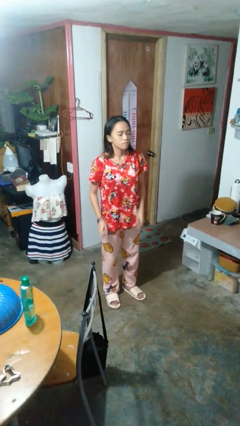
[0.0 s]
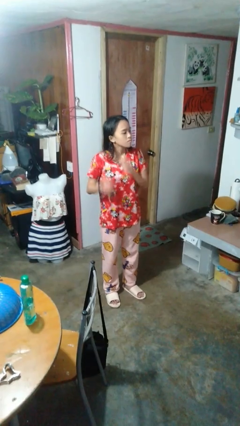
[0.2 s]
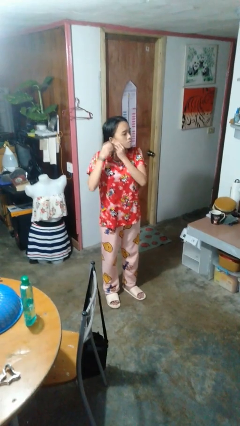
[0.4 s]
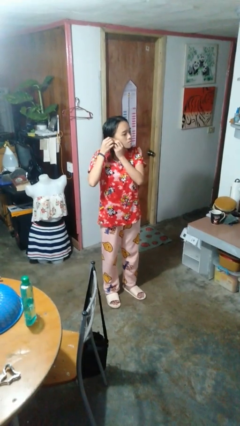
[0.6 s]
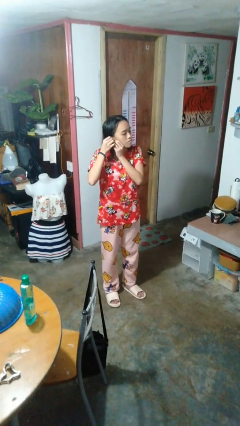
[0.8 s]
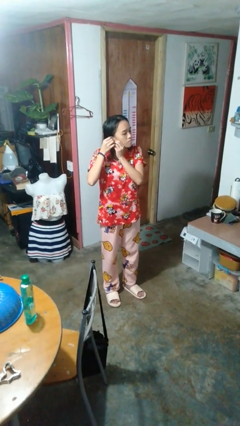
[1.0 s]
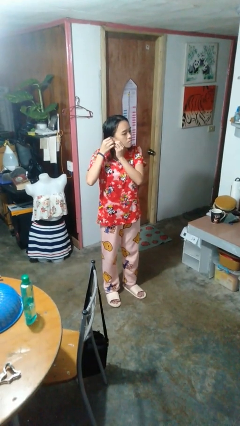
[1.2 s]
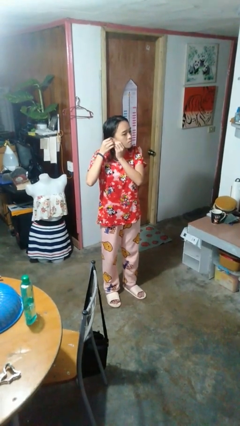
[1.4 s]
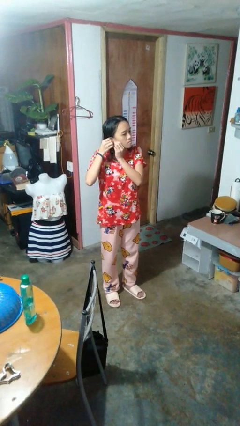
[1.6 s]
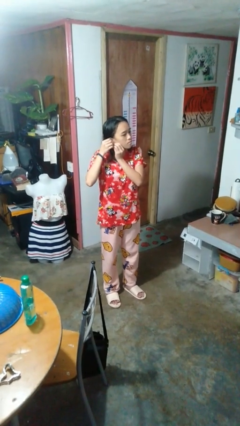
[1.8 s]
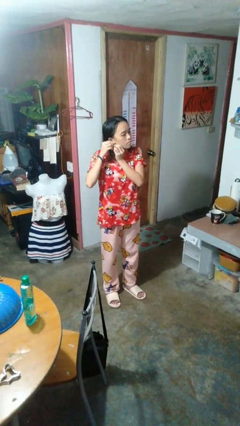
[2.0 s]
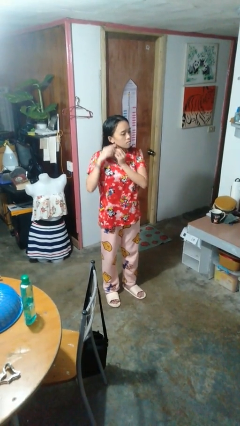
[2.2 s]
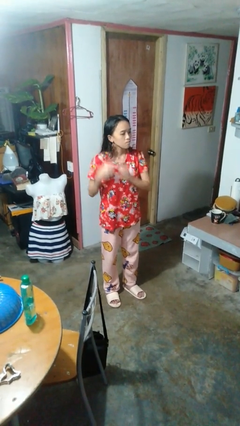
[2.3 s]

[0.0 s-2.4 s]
person puts on earrings

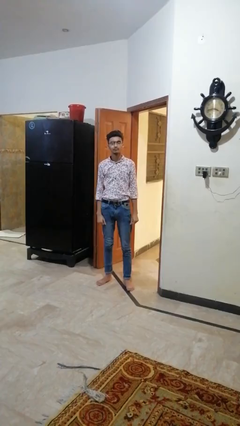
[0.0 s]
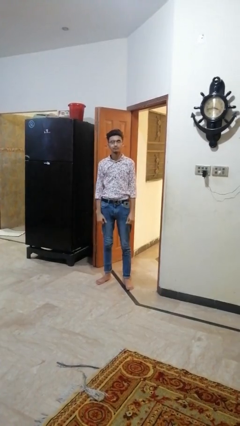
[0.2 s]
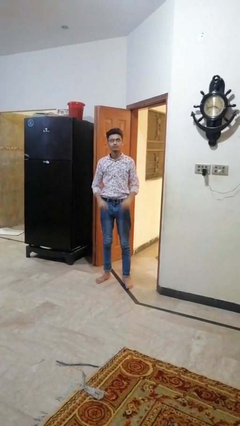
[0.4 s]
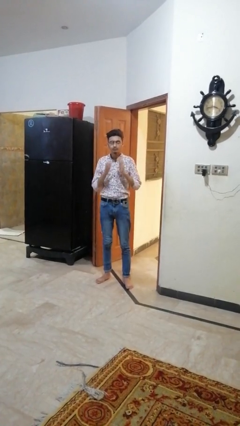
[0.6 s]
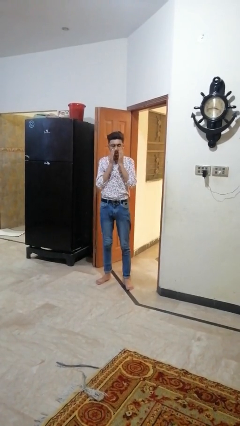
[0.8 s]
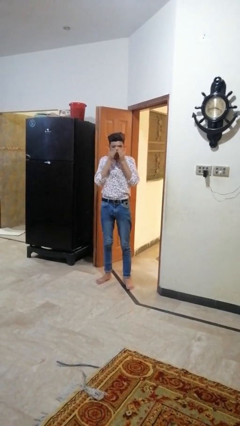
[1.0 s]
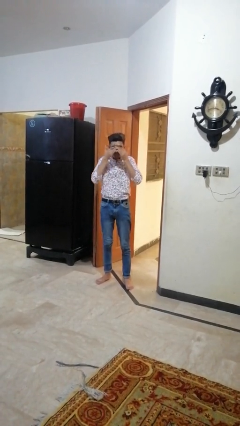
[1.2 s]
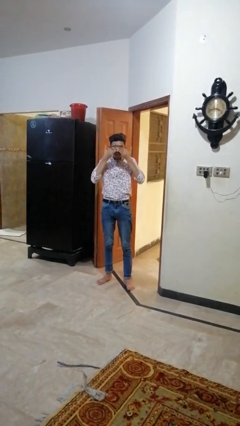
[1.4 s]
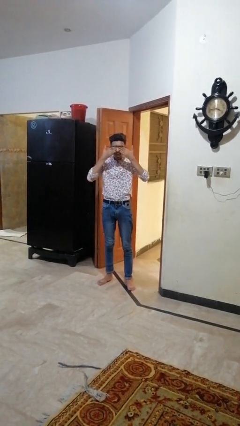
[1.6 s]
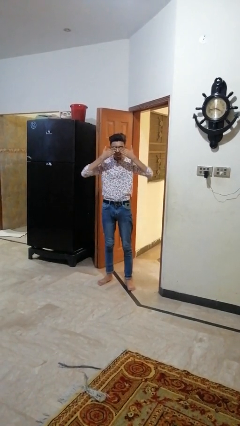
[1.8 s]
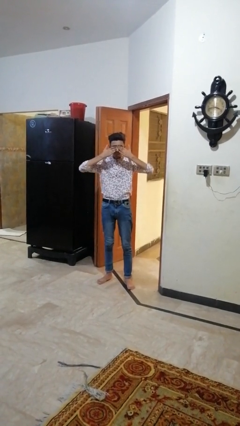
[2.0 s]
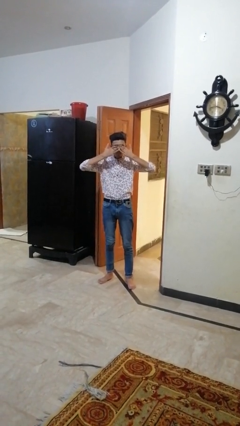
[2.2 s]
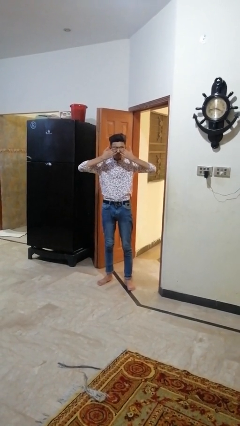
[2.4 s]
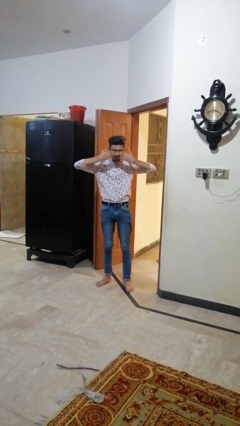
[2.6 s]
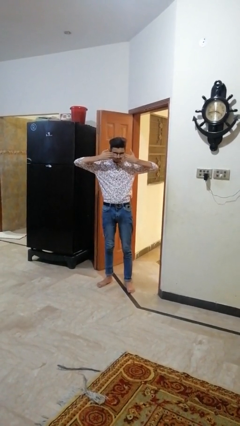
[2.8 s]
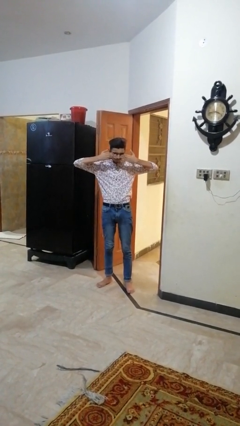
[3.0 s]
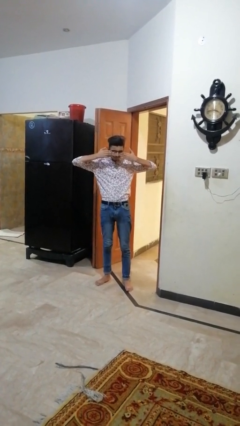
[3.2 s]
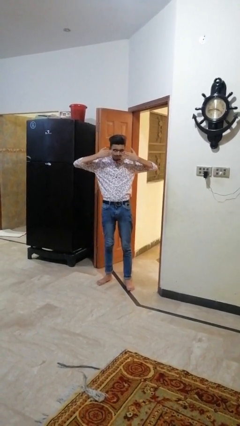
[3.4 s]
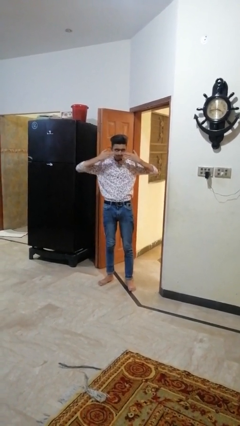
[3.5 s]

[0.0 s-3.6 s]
person rubs eyes

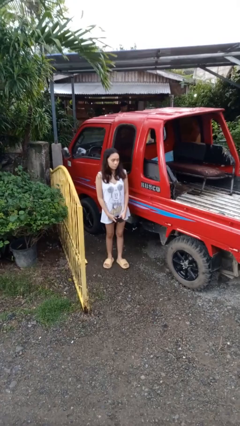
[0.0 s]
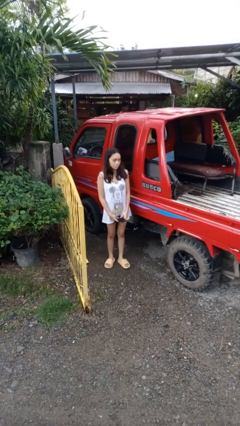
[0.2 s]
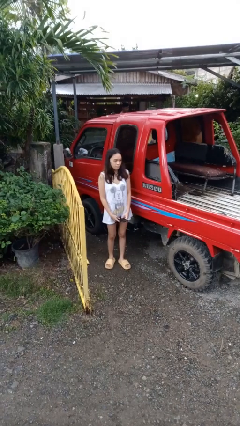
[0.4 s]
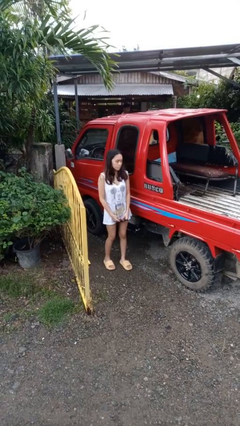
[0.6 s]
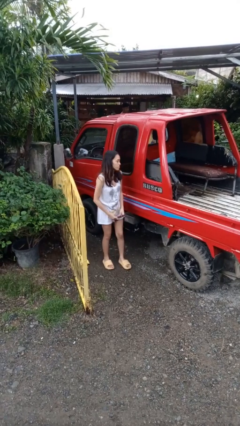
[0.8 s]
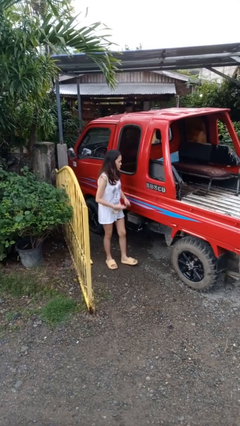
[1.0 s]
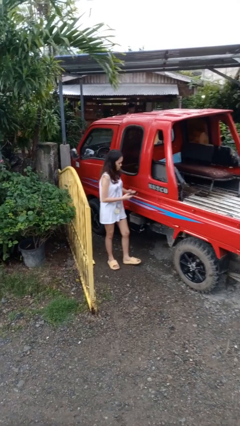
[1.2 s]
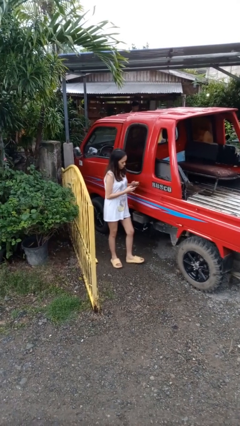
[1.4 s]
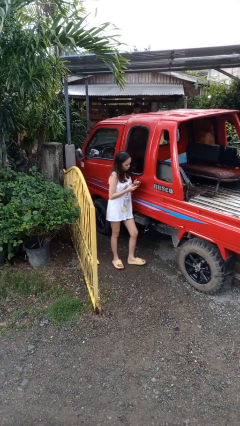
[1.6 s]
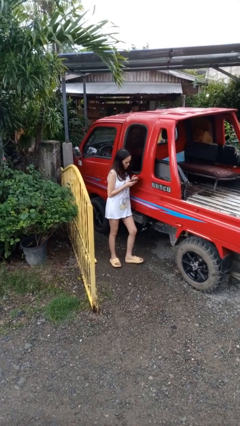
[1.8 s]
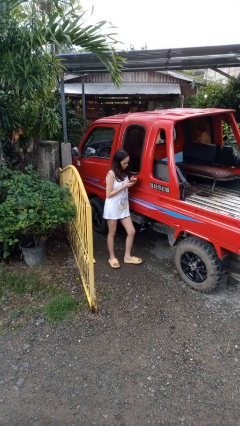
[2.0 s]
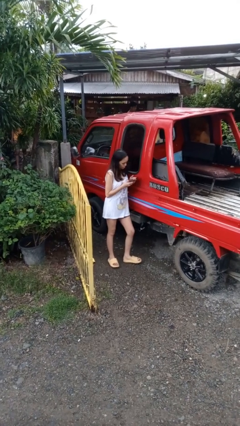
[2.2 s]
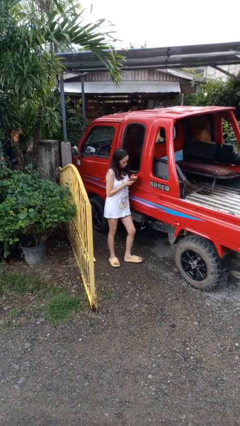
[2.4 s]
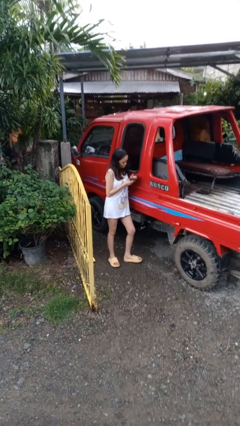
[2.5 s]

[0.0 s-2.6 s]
person leans against car

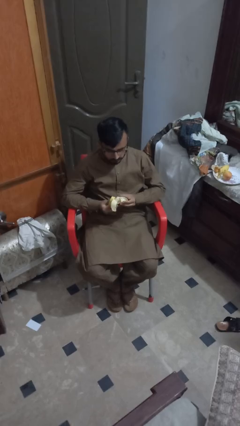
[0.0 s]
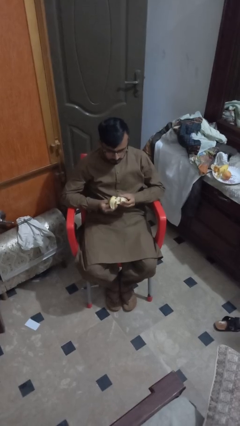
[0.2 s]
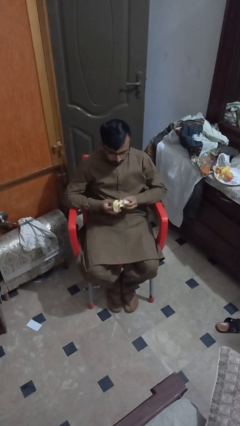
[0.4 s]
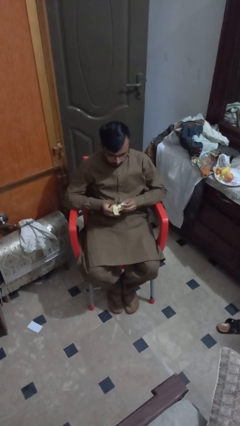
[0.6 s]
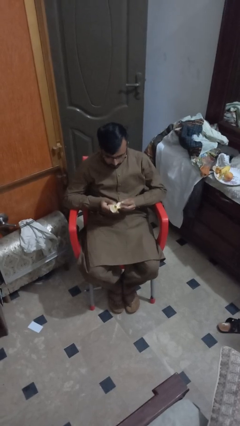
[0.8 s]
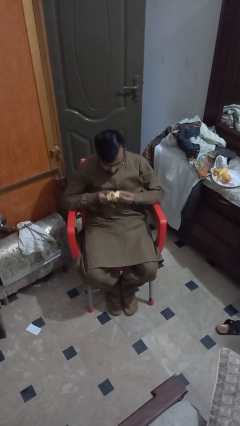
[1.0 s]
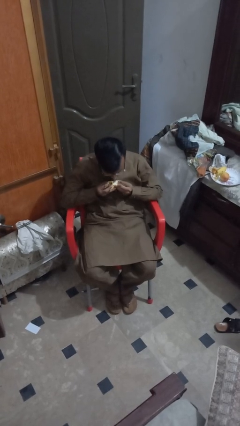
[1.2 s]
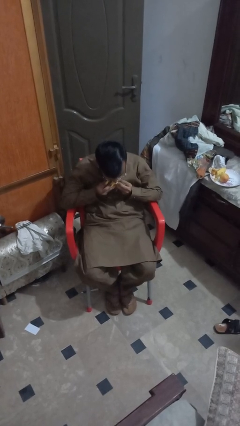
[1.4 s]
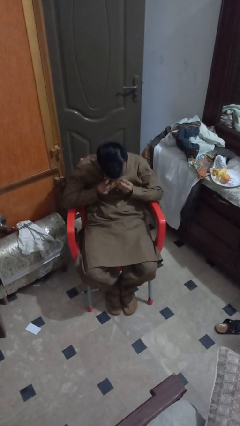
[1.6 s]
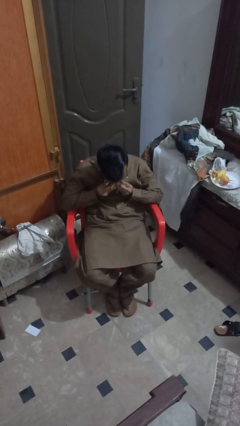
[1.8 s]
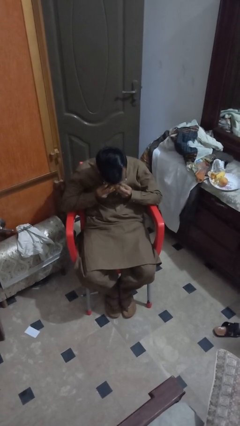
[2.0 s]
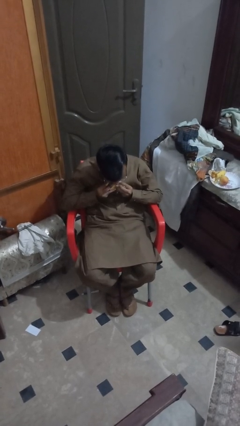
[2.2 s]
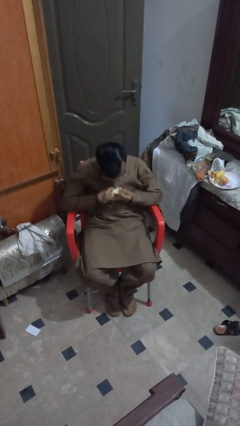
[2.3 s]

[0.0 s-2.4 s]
person eats banana

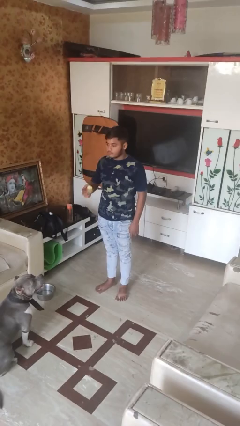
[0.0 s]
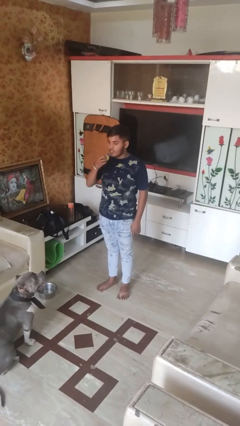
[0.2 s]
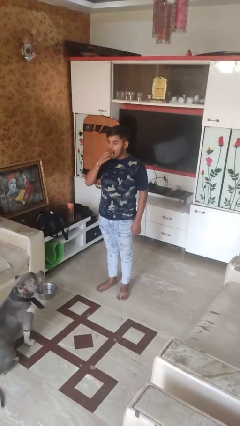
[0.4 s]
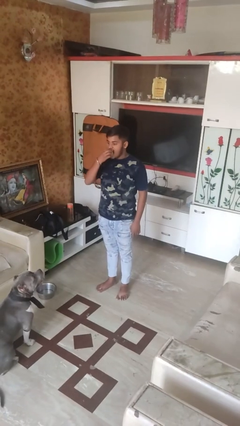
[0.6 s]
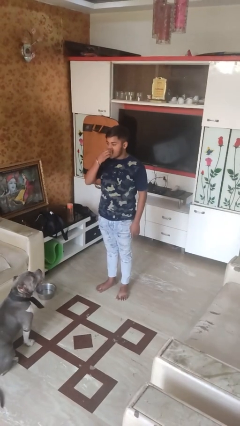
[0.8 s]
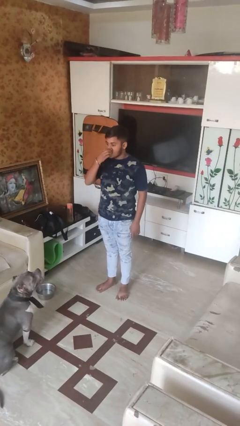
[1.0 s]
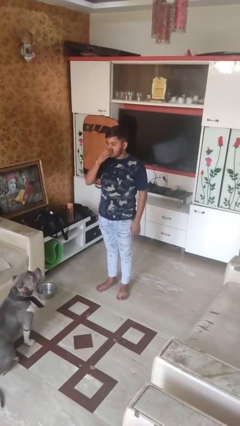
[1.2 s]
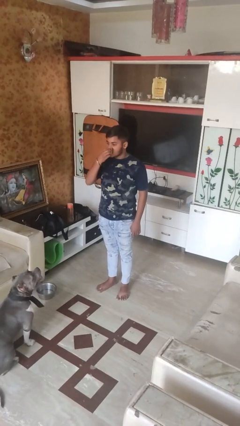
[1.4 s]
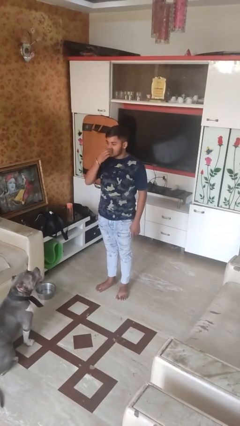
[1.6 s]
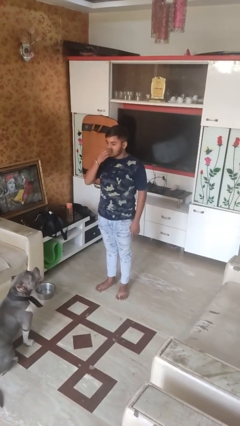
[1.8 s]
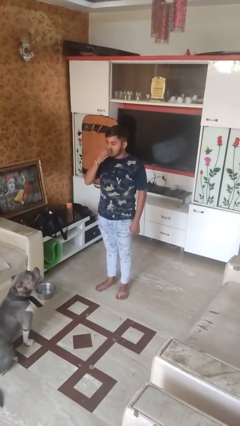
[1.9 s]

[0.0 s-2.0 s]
person eats apple

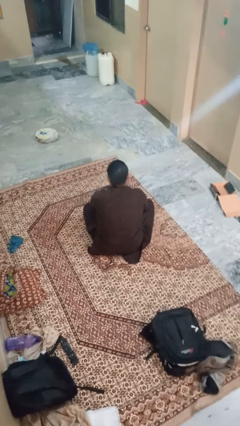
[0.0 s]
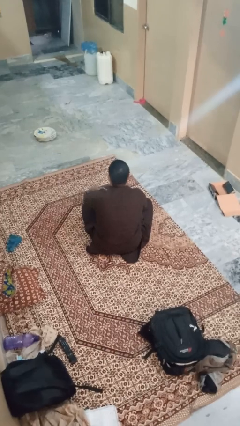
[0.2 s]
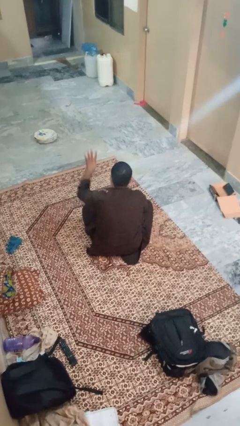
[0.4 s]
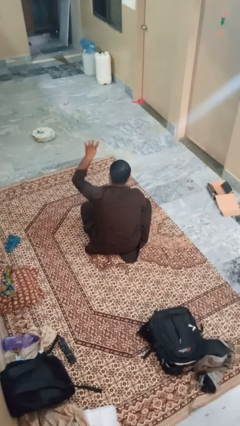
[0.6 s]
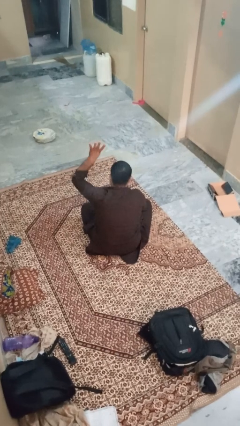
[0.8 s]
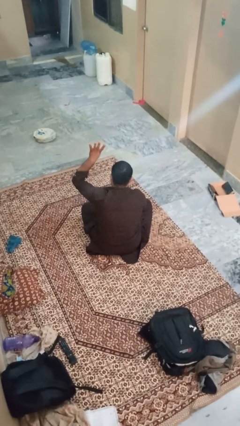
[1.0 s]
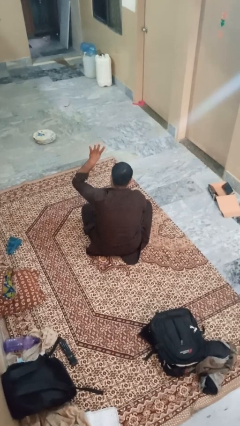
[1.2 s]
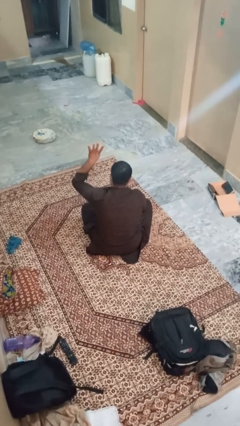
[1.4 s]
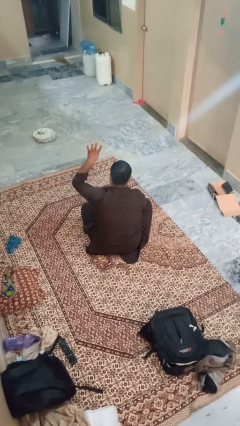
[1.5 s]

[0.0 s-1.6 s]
person gestures number four

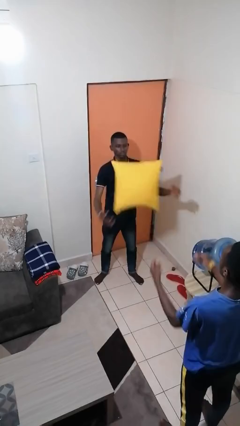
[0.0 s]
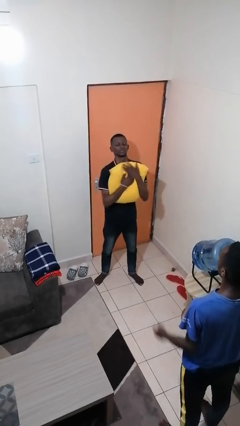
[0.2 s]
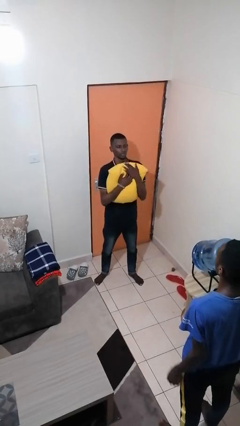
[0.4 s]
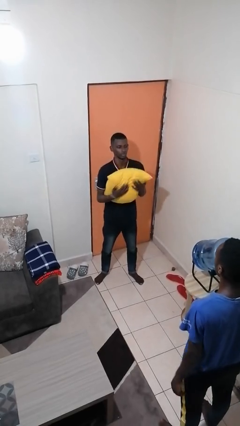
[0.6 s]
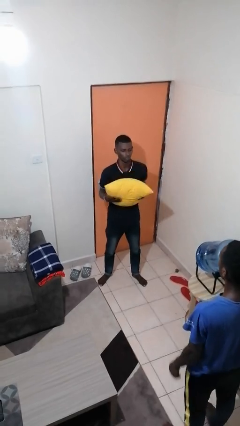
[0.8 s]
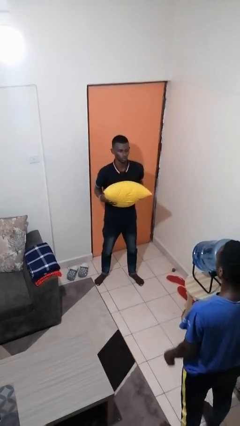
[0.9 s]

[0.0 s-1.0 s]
person catches object from person

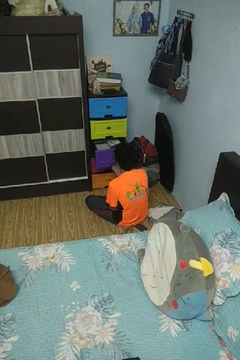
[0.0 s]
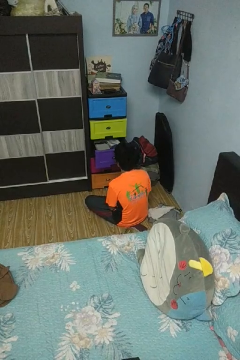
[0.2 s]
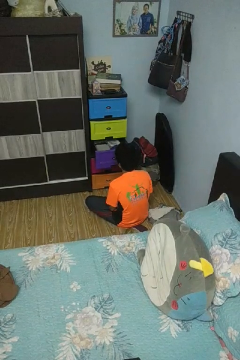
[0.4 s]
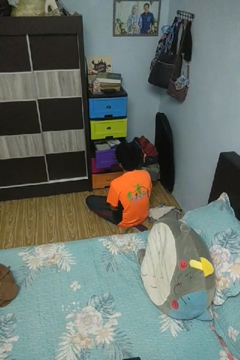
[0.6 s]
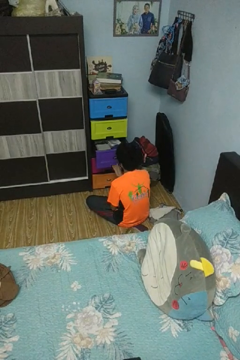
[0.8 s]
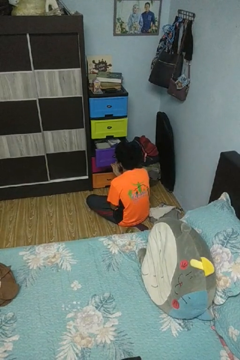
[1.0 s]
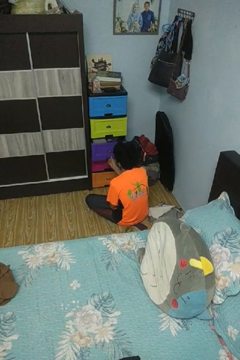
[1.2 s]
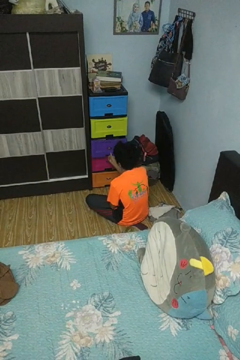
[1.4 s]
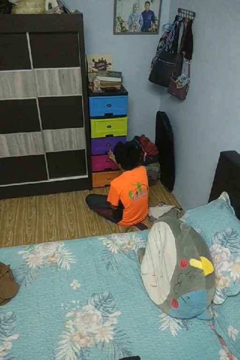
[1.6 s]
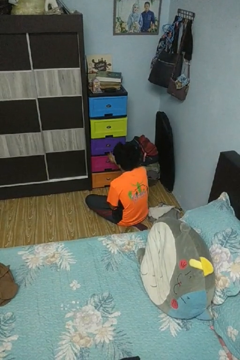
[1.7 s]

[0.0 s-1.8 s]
person closes dresser drawer
